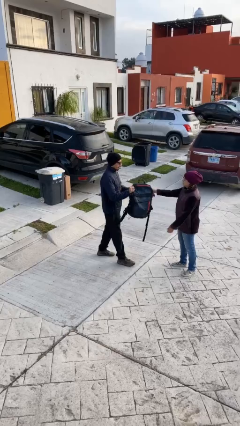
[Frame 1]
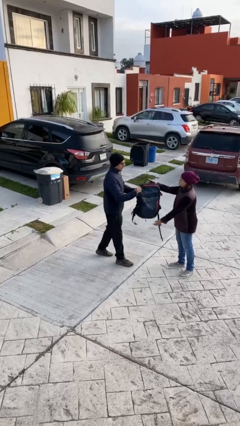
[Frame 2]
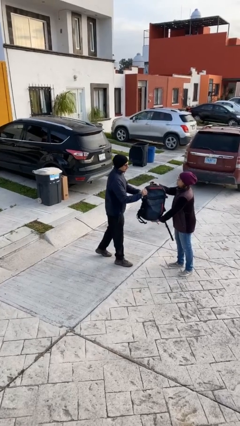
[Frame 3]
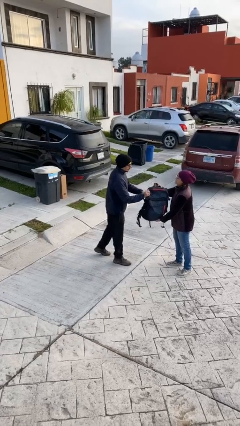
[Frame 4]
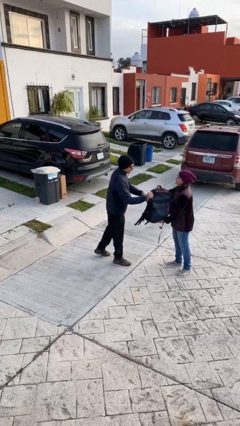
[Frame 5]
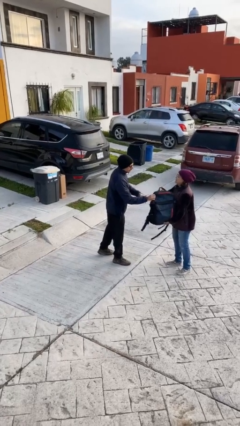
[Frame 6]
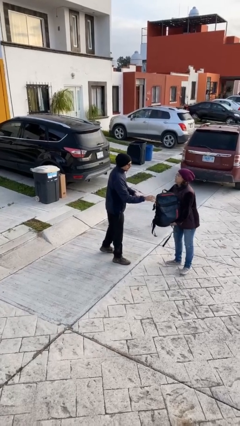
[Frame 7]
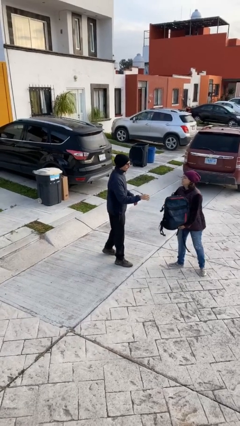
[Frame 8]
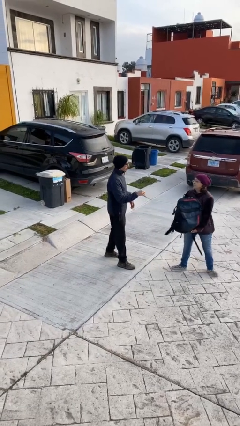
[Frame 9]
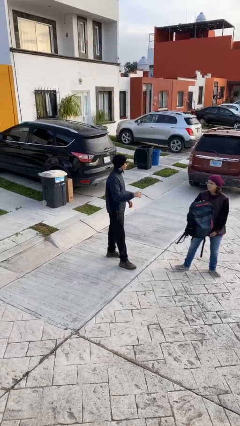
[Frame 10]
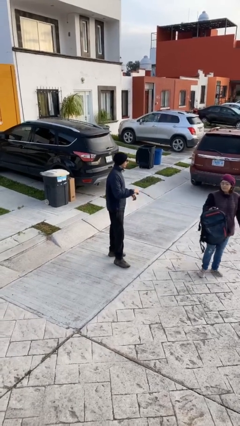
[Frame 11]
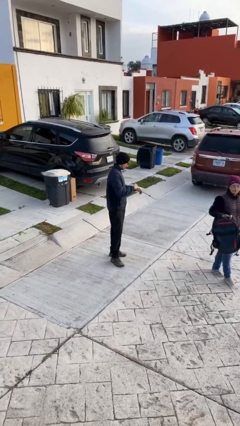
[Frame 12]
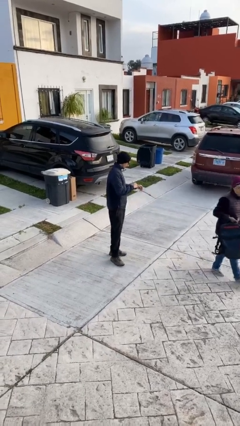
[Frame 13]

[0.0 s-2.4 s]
person transfers object to person

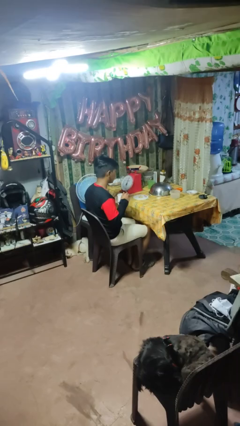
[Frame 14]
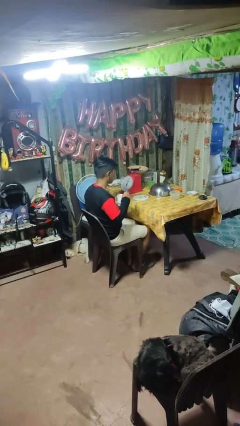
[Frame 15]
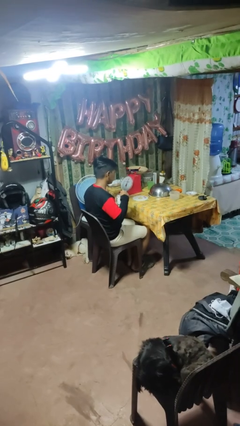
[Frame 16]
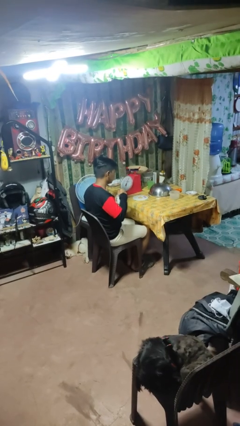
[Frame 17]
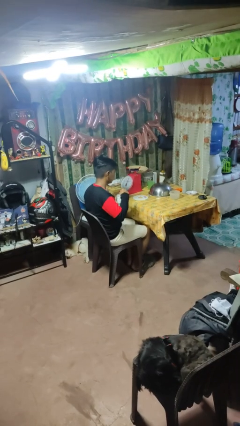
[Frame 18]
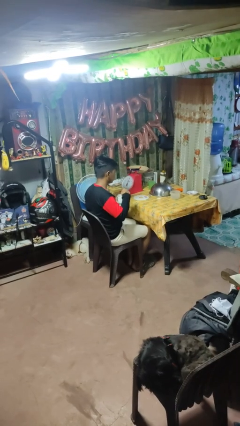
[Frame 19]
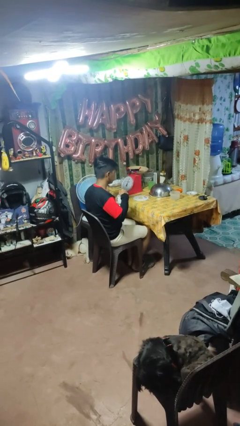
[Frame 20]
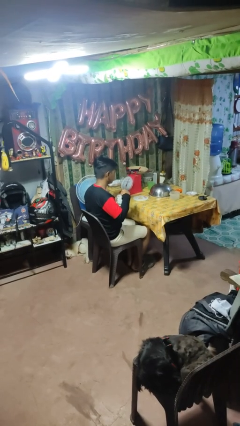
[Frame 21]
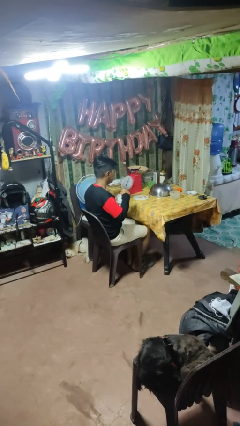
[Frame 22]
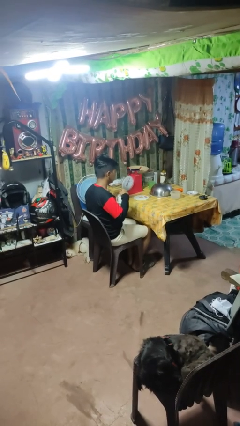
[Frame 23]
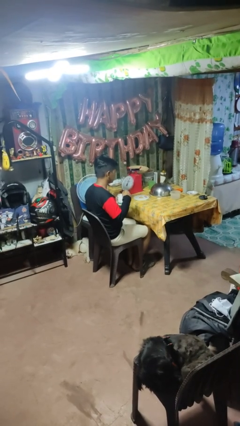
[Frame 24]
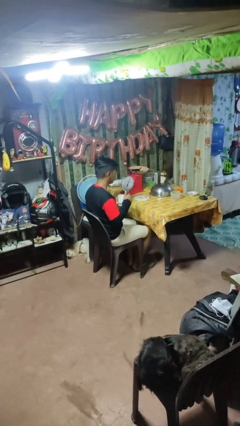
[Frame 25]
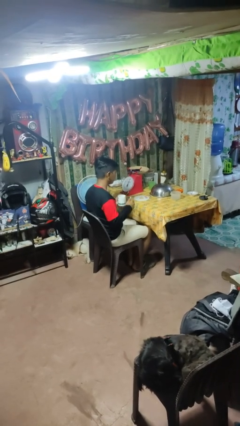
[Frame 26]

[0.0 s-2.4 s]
person stirs mug

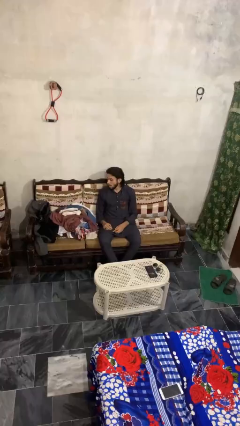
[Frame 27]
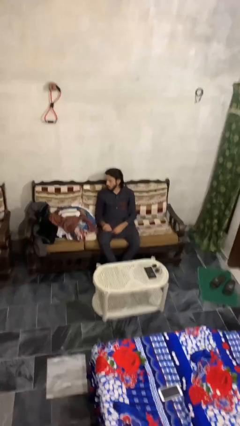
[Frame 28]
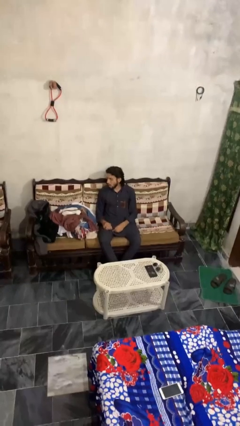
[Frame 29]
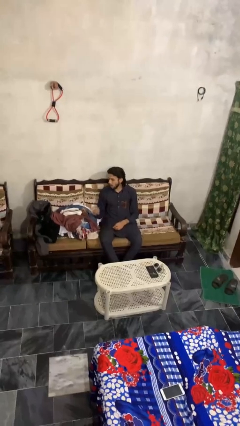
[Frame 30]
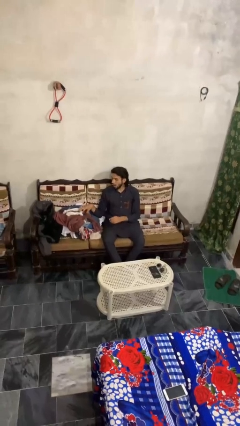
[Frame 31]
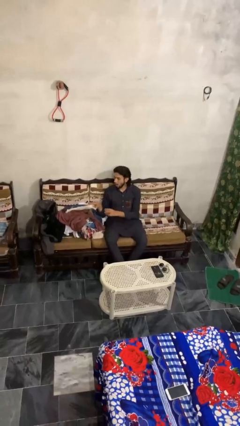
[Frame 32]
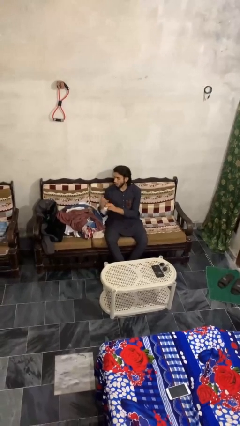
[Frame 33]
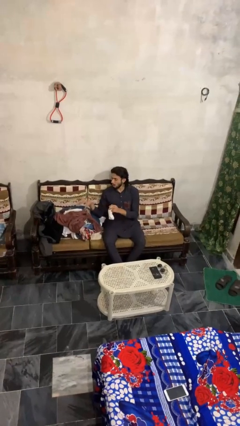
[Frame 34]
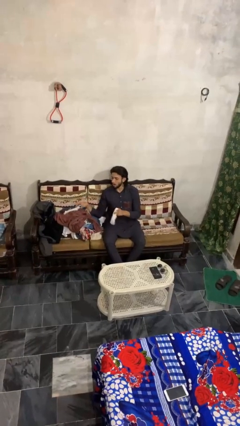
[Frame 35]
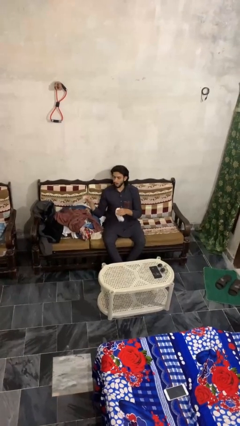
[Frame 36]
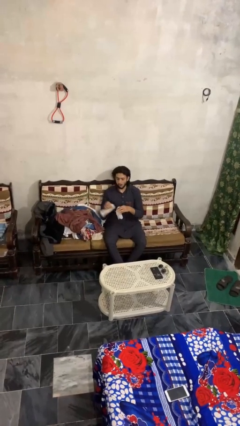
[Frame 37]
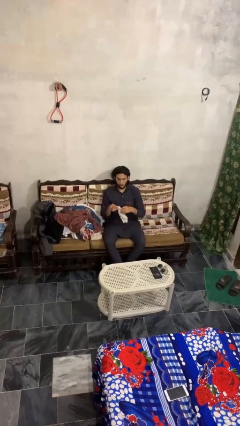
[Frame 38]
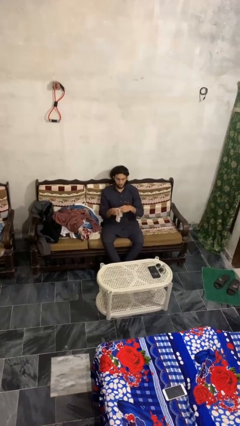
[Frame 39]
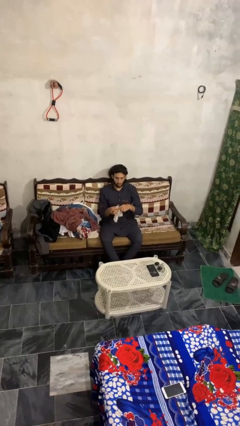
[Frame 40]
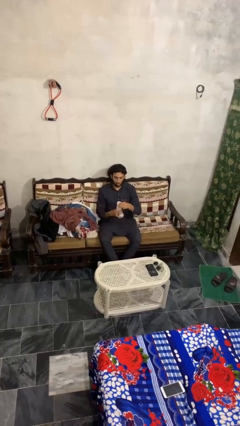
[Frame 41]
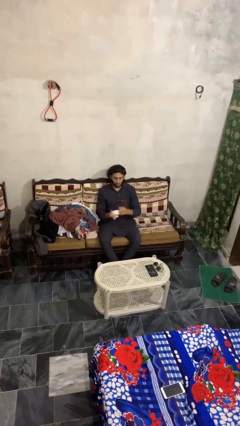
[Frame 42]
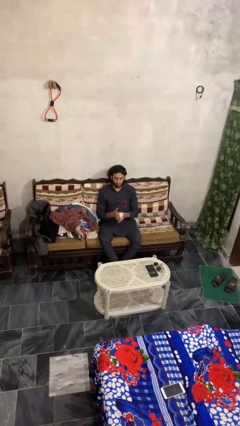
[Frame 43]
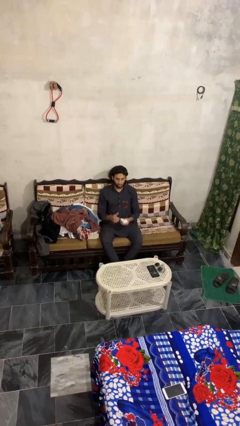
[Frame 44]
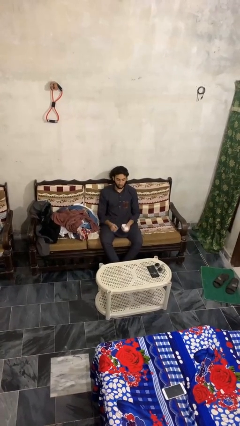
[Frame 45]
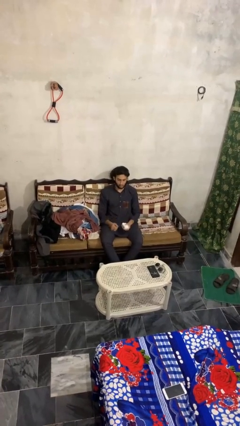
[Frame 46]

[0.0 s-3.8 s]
person folds socks

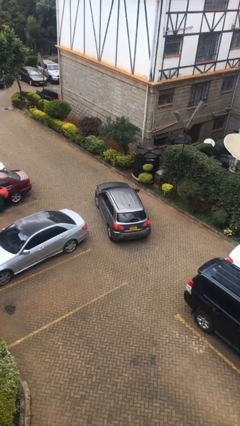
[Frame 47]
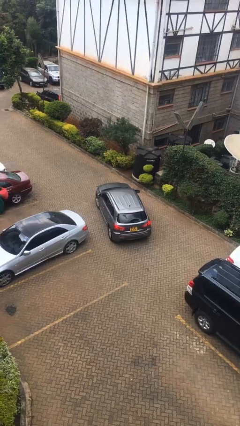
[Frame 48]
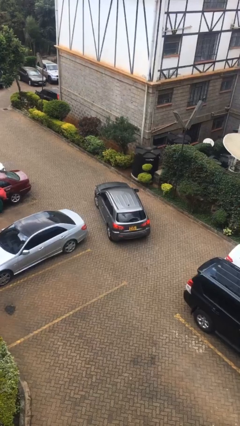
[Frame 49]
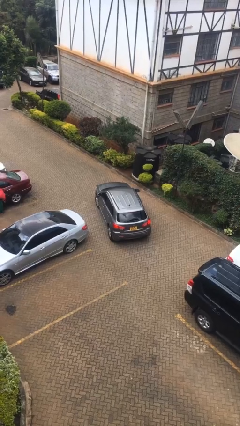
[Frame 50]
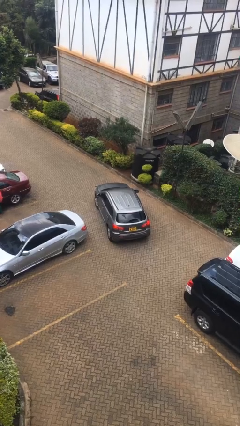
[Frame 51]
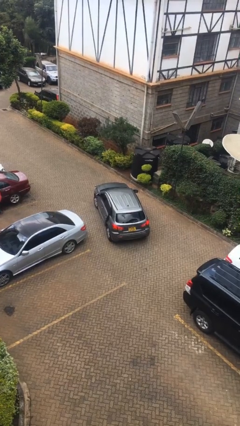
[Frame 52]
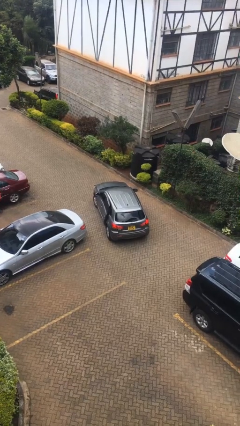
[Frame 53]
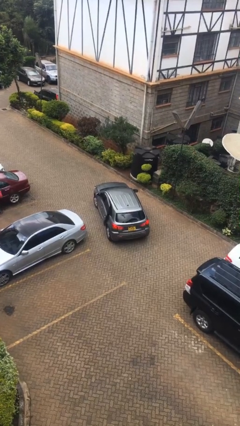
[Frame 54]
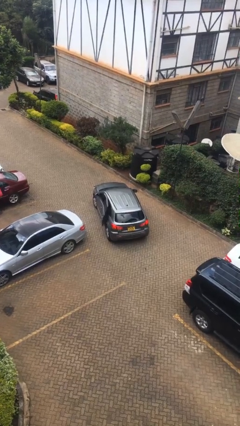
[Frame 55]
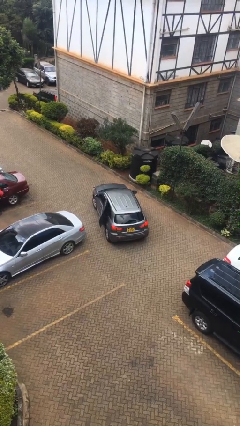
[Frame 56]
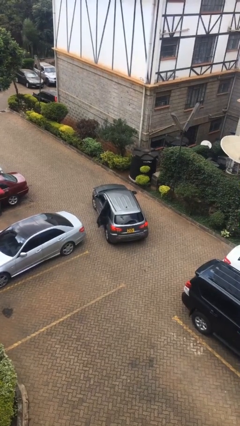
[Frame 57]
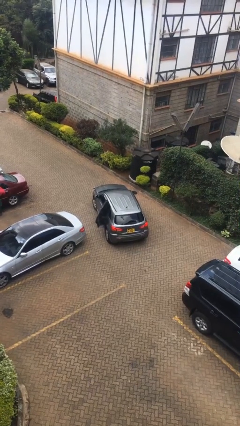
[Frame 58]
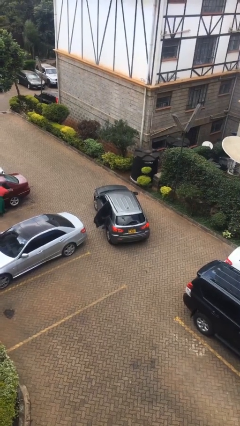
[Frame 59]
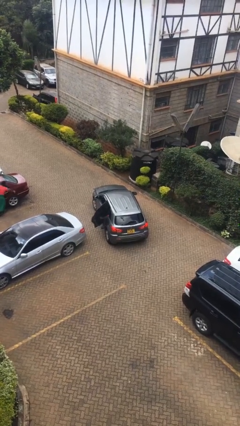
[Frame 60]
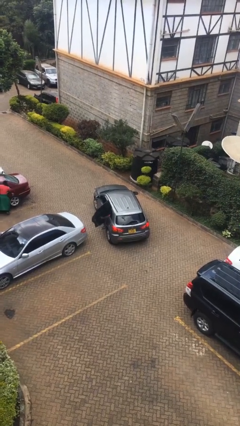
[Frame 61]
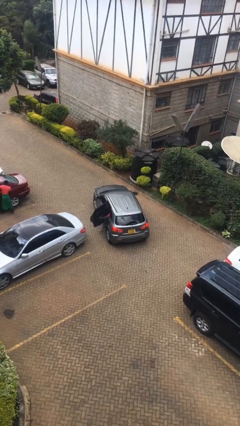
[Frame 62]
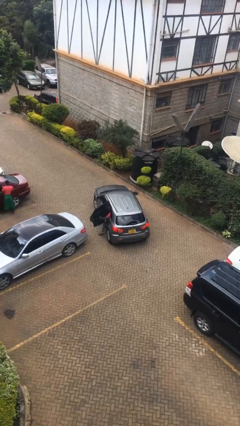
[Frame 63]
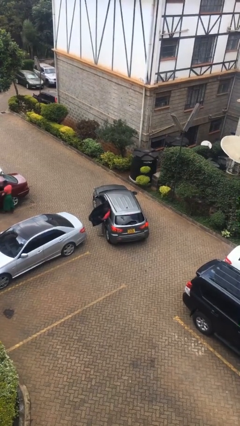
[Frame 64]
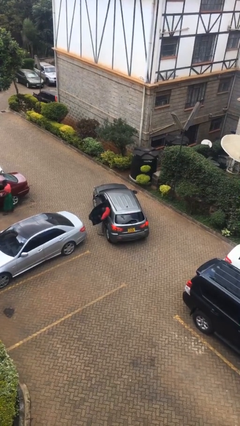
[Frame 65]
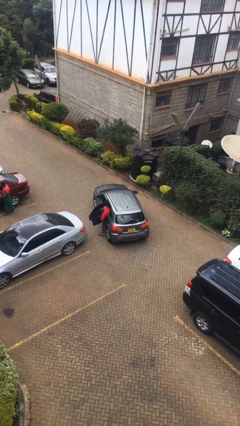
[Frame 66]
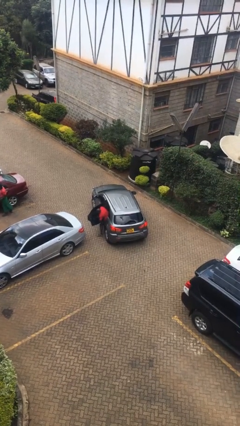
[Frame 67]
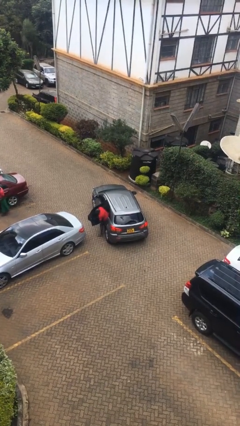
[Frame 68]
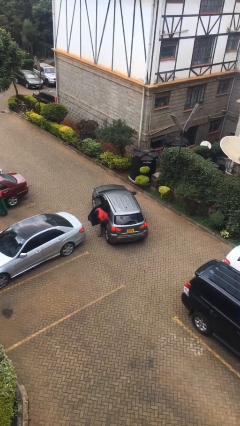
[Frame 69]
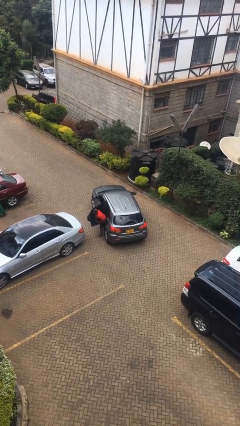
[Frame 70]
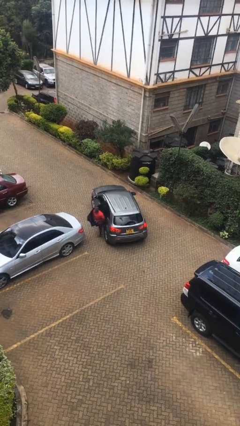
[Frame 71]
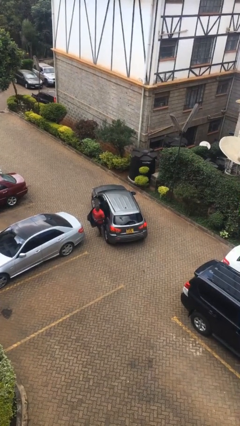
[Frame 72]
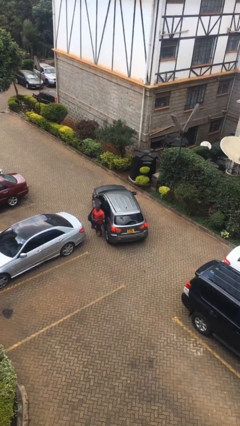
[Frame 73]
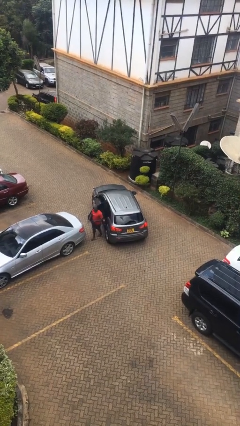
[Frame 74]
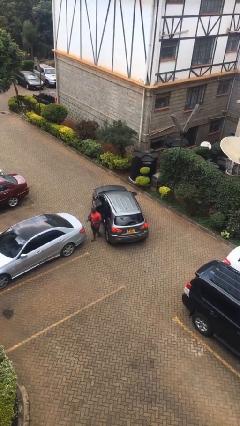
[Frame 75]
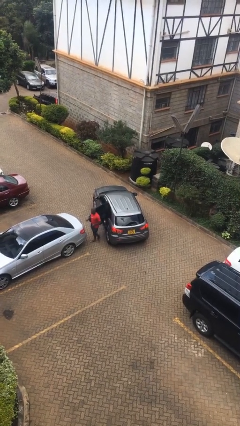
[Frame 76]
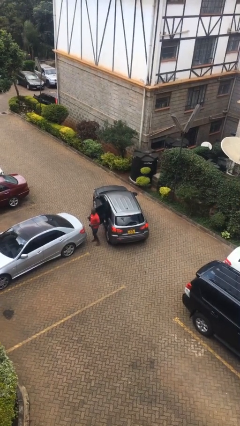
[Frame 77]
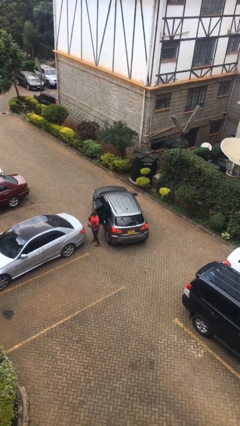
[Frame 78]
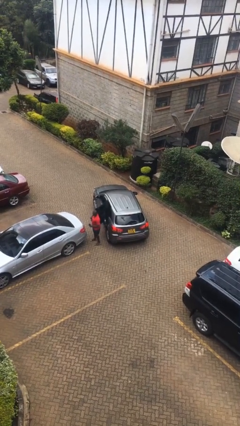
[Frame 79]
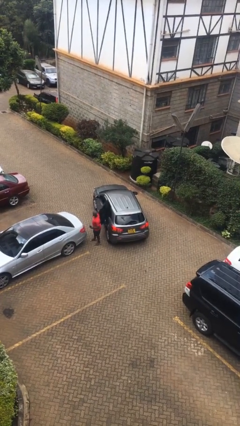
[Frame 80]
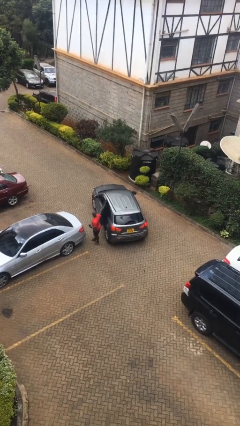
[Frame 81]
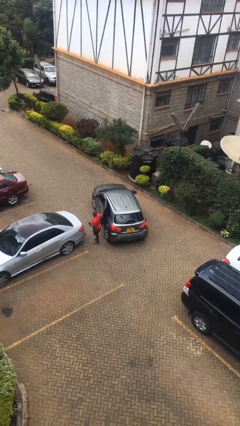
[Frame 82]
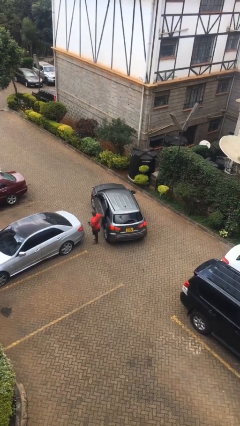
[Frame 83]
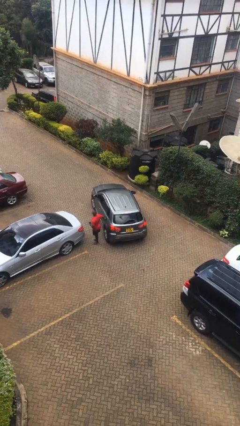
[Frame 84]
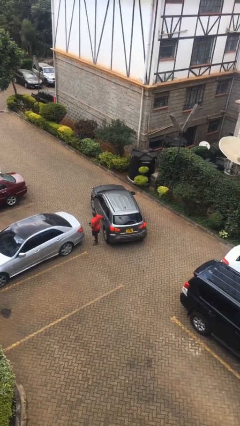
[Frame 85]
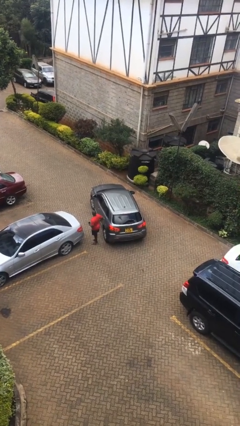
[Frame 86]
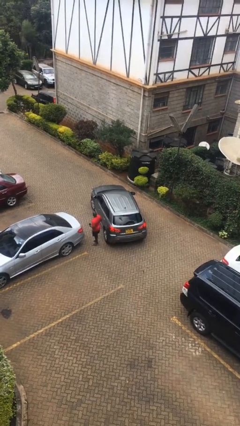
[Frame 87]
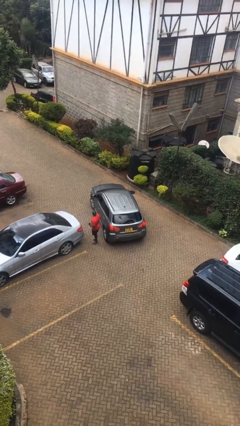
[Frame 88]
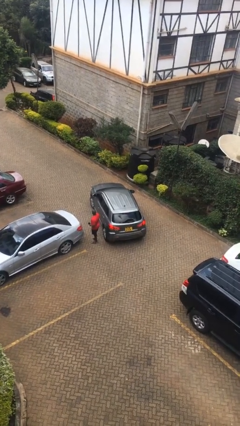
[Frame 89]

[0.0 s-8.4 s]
car drops off person

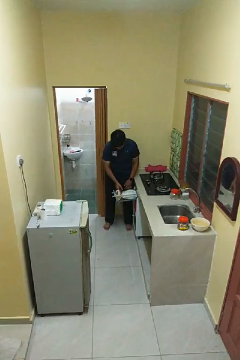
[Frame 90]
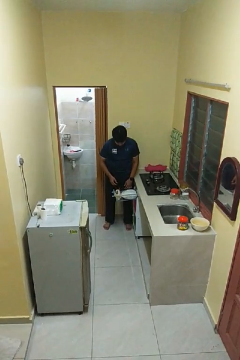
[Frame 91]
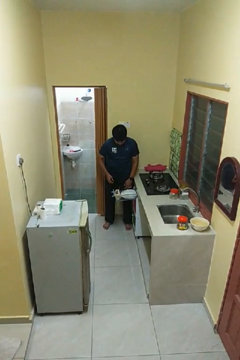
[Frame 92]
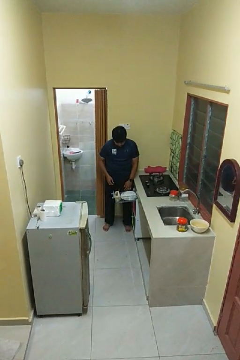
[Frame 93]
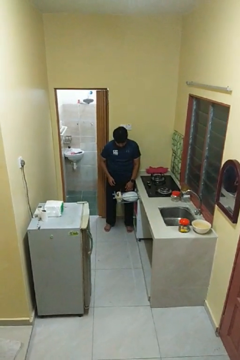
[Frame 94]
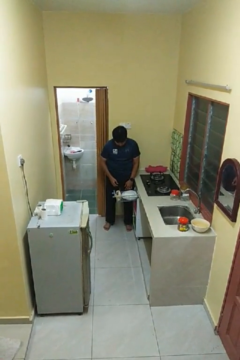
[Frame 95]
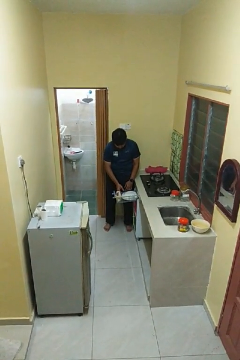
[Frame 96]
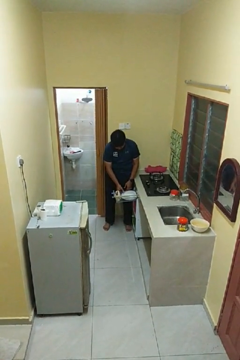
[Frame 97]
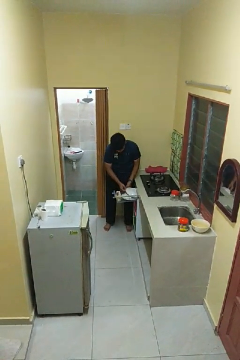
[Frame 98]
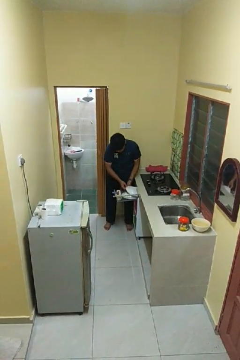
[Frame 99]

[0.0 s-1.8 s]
person searches in kitchen drawer
